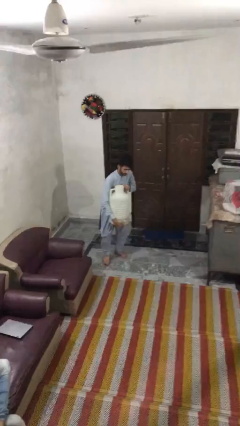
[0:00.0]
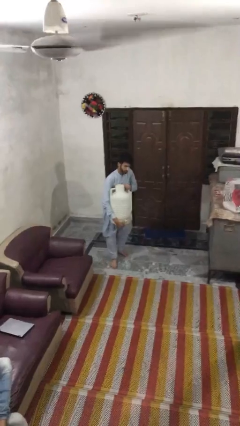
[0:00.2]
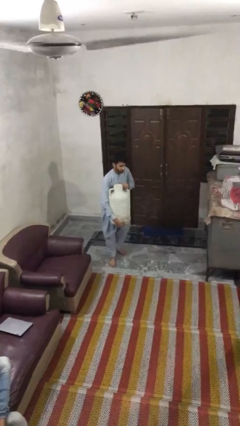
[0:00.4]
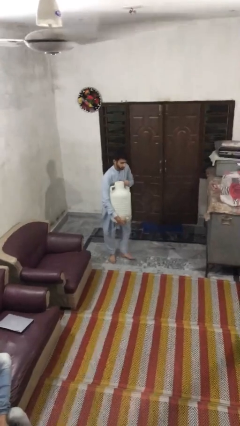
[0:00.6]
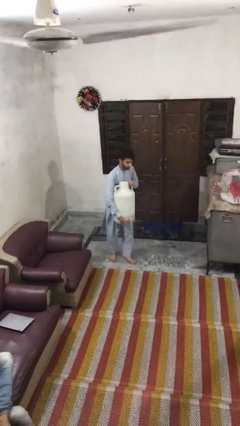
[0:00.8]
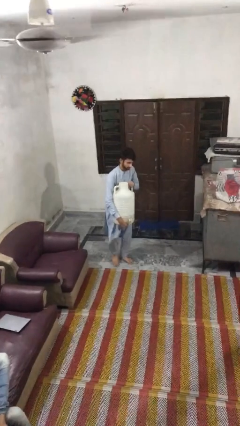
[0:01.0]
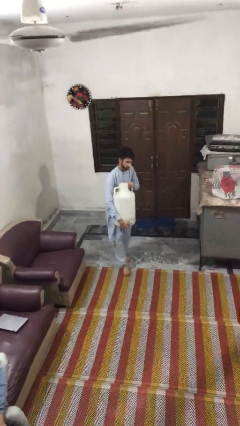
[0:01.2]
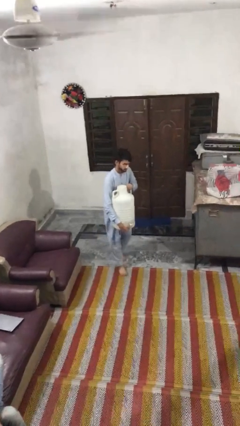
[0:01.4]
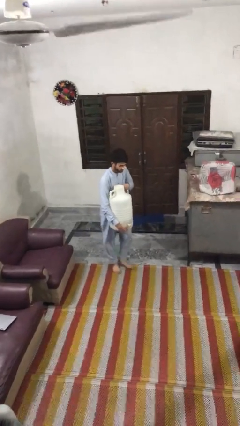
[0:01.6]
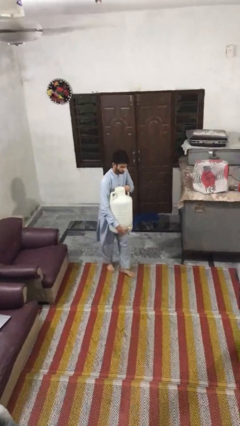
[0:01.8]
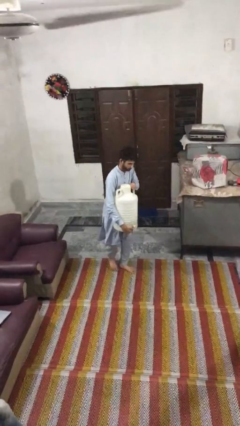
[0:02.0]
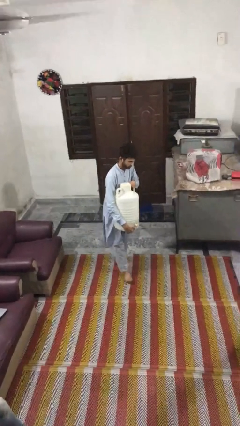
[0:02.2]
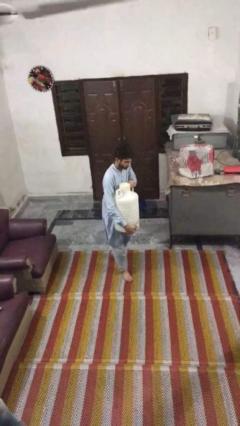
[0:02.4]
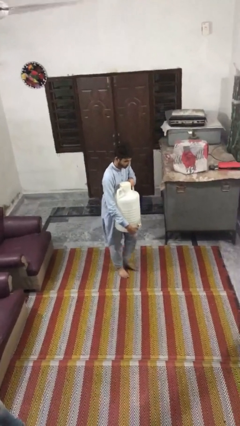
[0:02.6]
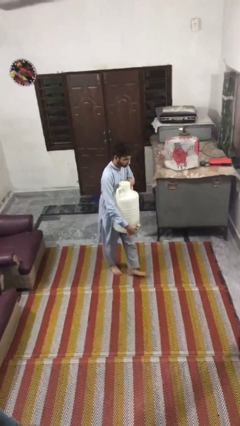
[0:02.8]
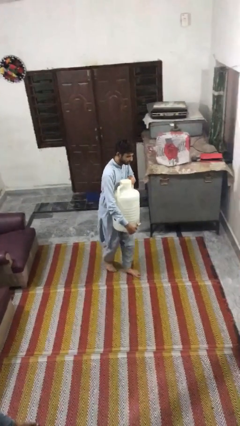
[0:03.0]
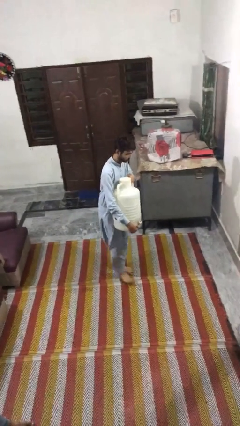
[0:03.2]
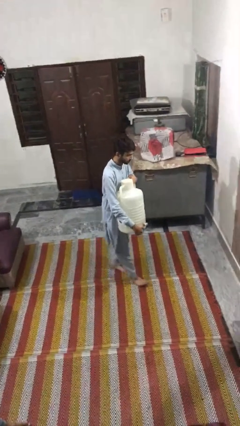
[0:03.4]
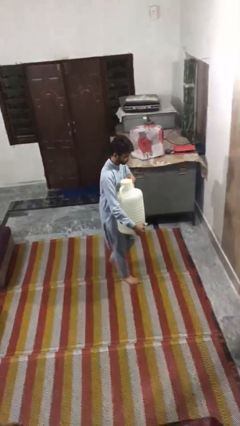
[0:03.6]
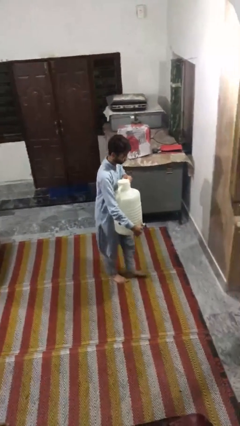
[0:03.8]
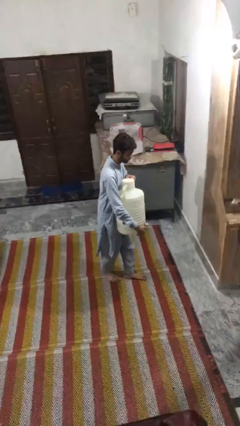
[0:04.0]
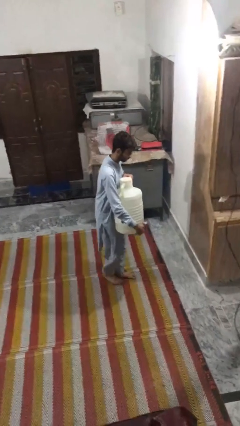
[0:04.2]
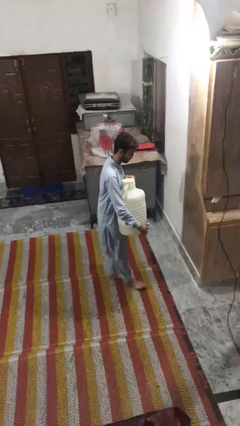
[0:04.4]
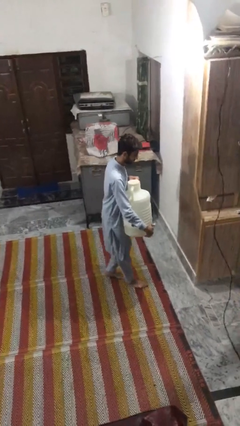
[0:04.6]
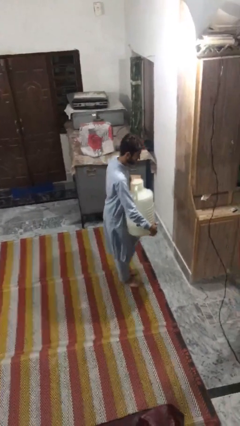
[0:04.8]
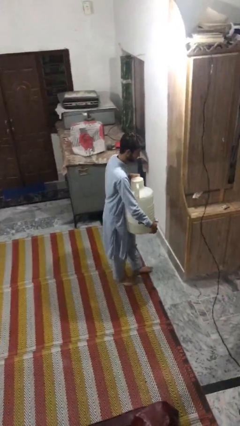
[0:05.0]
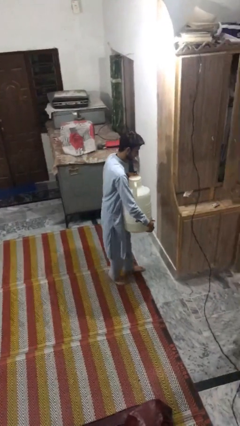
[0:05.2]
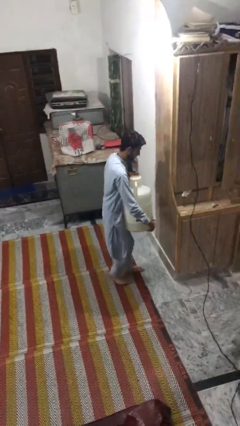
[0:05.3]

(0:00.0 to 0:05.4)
person carries heavy object

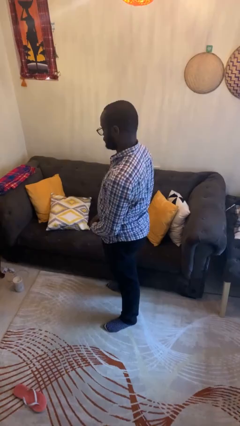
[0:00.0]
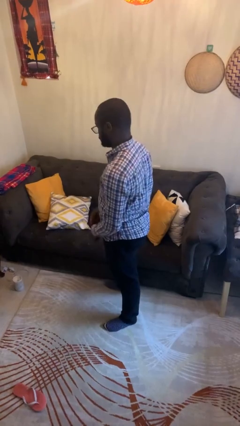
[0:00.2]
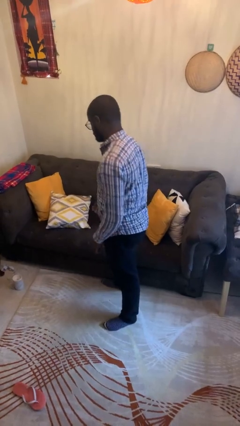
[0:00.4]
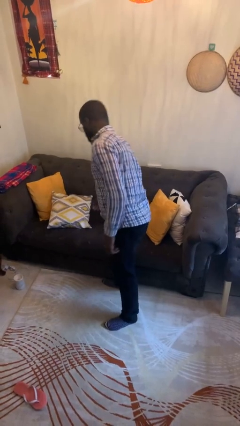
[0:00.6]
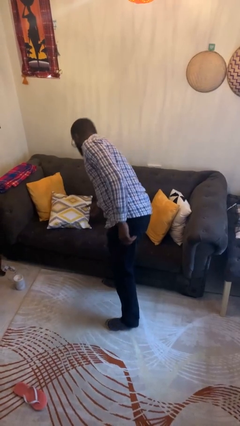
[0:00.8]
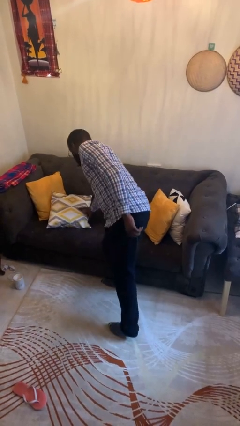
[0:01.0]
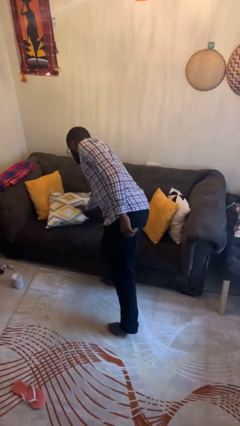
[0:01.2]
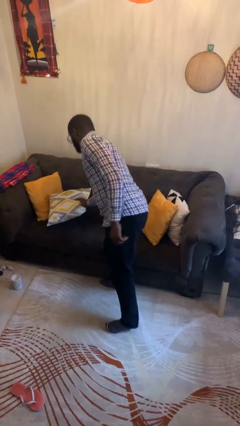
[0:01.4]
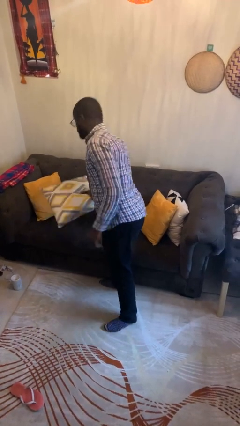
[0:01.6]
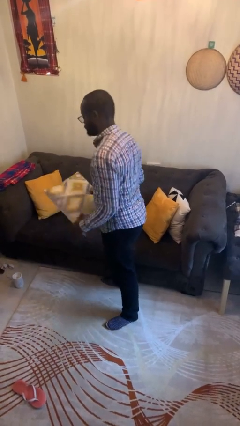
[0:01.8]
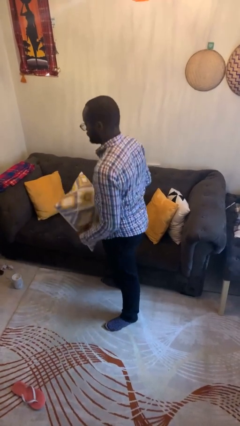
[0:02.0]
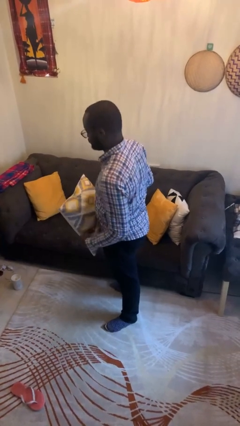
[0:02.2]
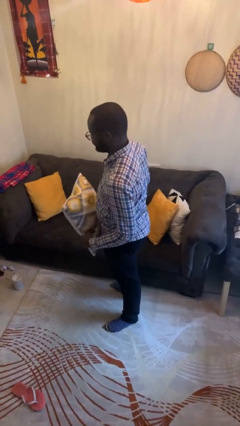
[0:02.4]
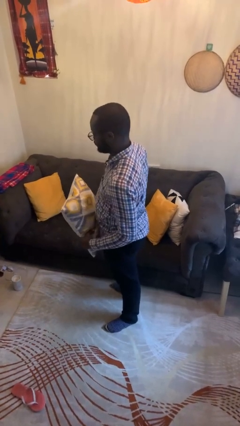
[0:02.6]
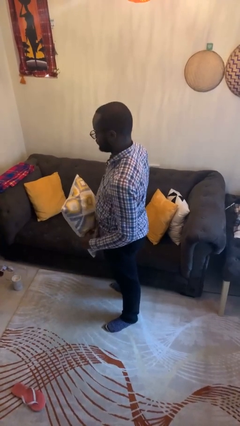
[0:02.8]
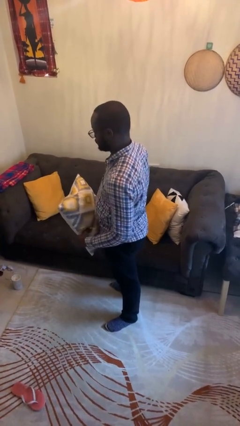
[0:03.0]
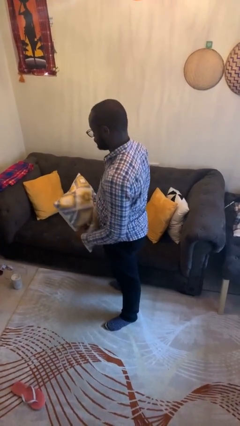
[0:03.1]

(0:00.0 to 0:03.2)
person picks up object from couch

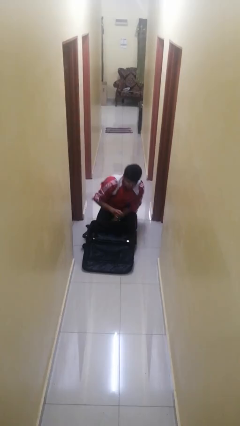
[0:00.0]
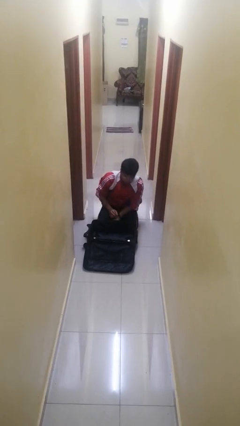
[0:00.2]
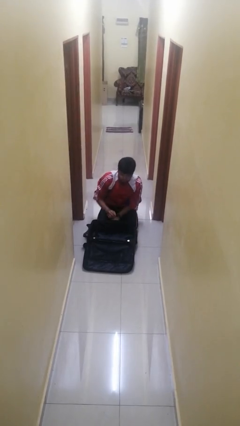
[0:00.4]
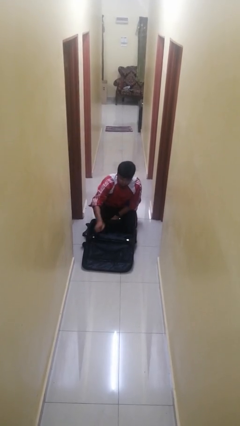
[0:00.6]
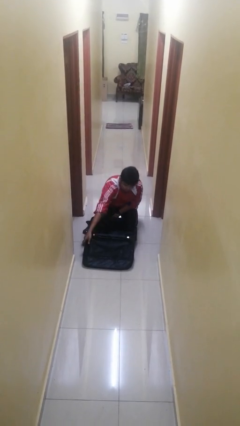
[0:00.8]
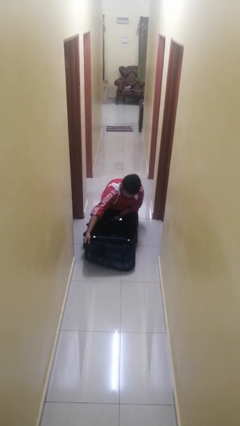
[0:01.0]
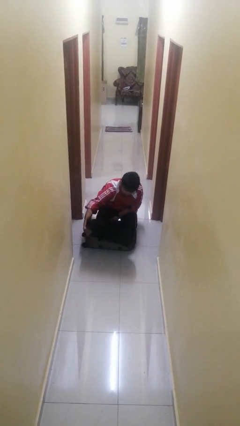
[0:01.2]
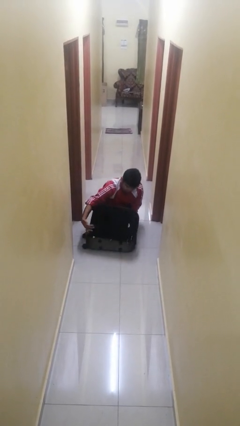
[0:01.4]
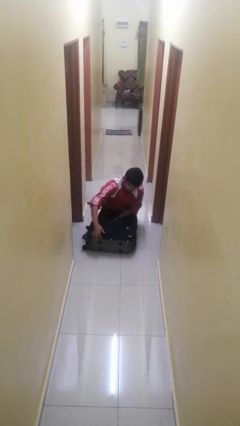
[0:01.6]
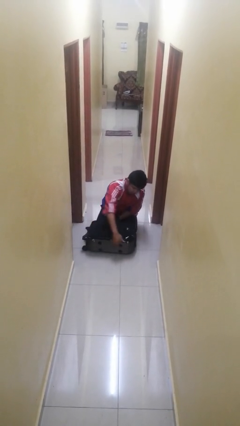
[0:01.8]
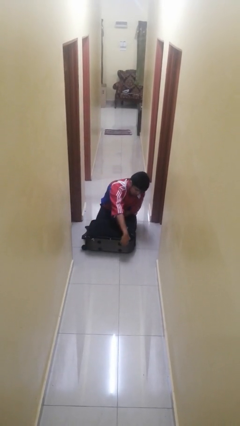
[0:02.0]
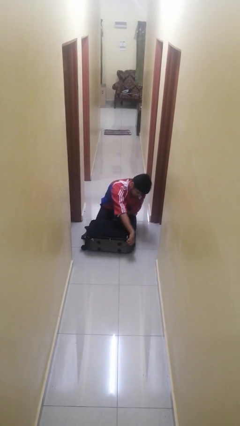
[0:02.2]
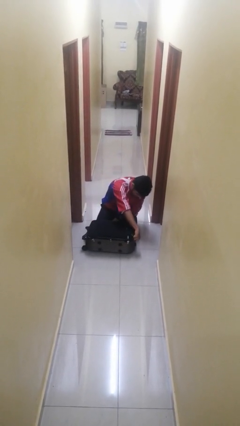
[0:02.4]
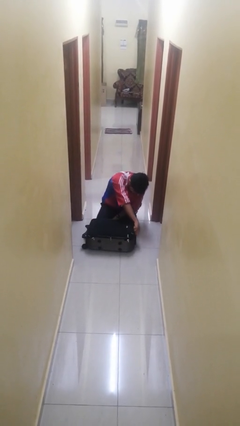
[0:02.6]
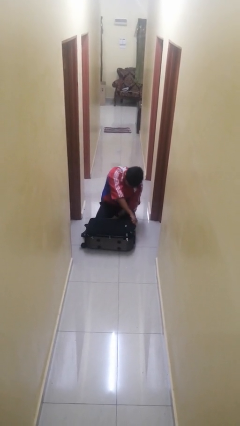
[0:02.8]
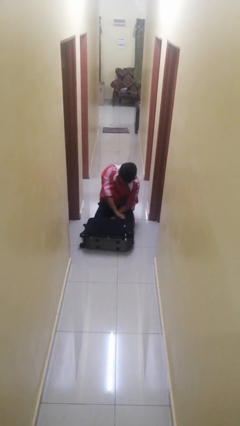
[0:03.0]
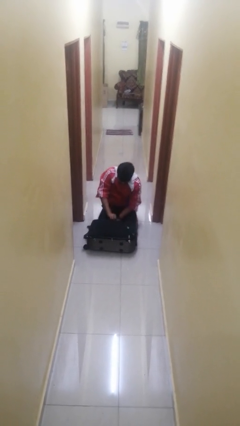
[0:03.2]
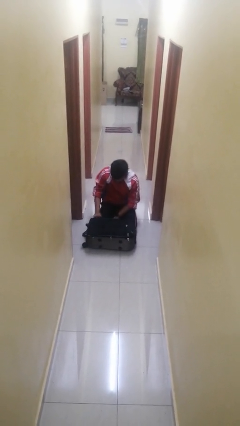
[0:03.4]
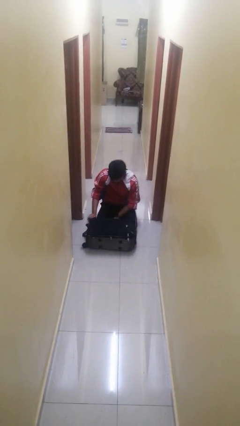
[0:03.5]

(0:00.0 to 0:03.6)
person closes suitcase

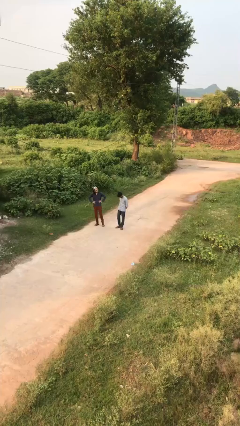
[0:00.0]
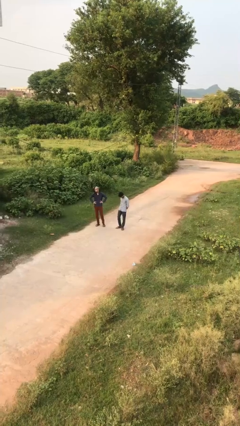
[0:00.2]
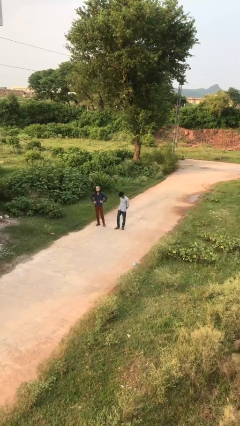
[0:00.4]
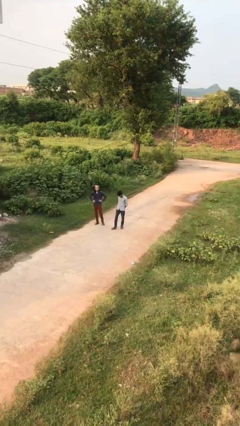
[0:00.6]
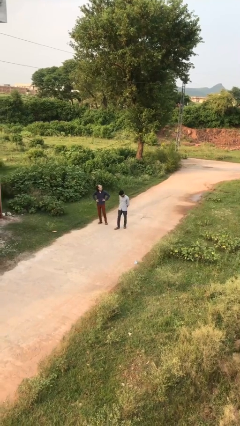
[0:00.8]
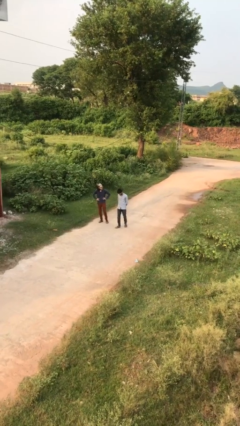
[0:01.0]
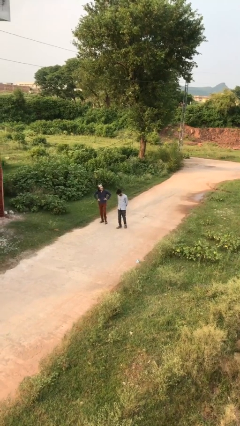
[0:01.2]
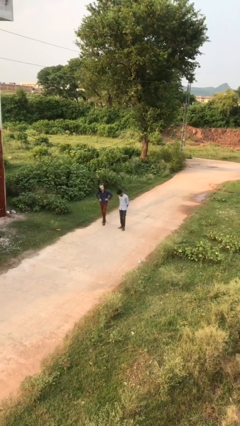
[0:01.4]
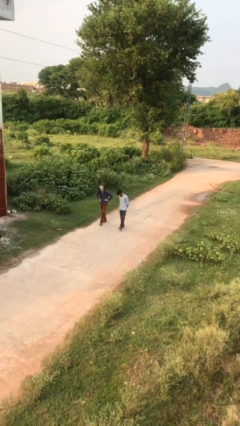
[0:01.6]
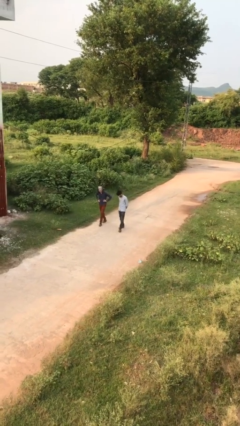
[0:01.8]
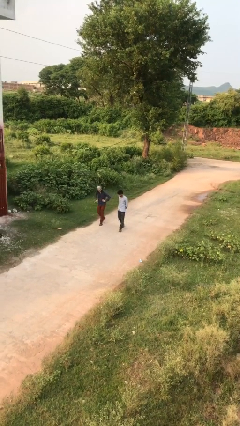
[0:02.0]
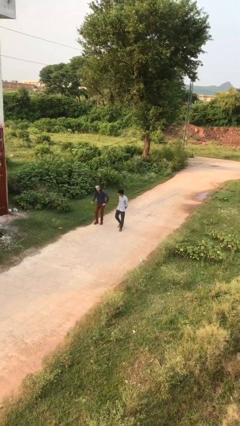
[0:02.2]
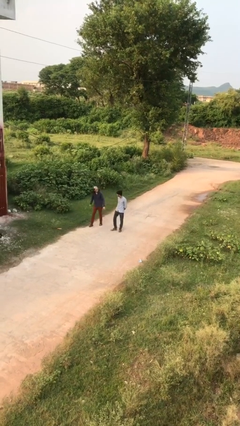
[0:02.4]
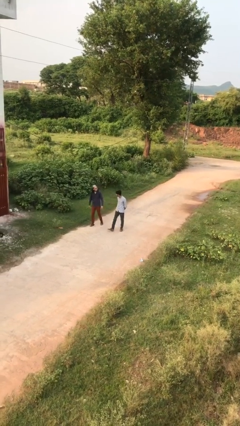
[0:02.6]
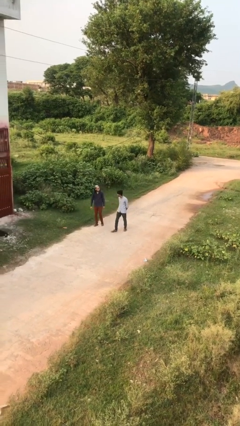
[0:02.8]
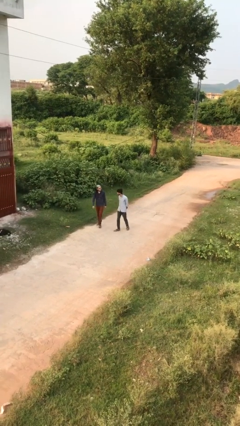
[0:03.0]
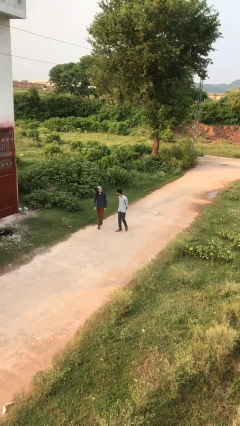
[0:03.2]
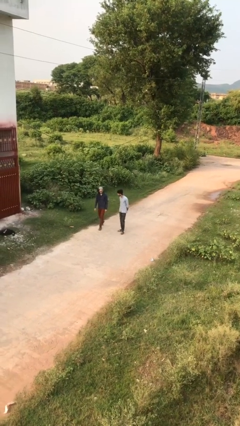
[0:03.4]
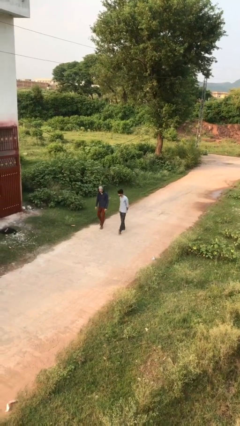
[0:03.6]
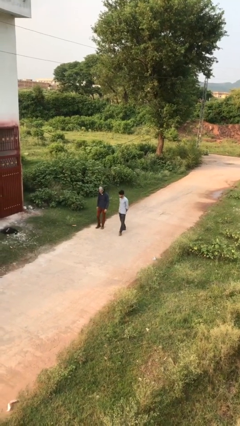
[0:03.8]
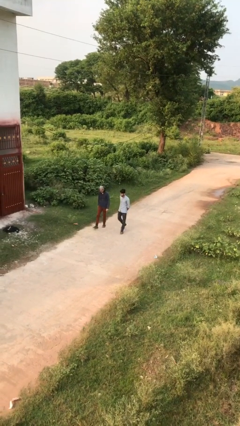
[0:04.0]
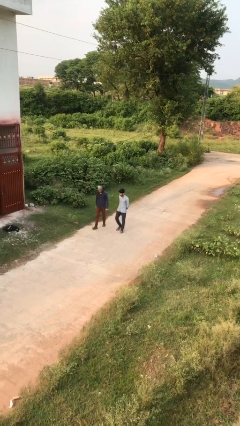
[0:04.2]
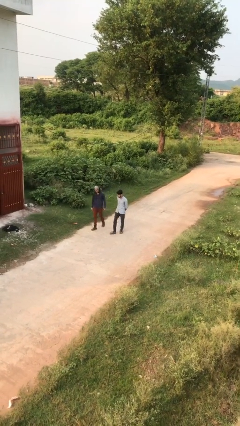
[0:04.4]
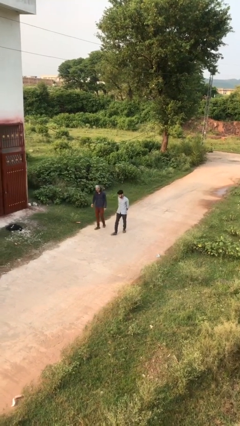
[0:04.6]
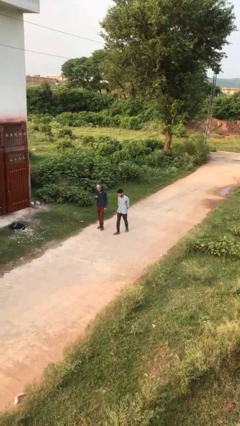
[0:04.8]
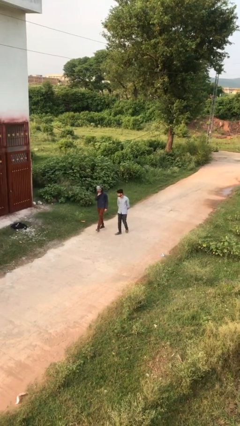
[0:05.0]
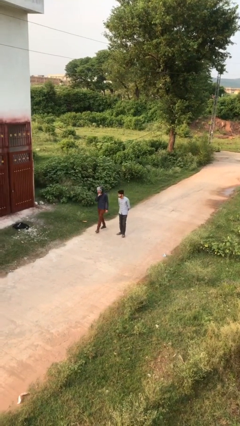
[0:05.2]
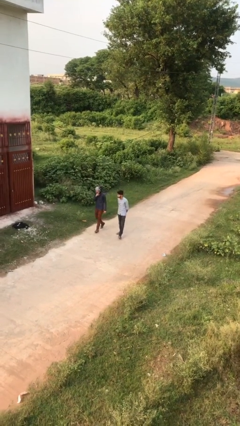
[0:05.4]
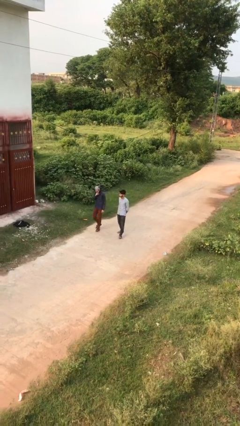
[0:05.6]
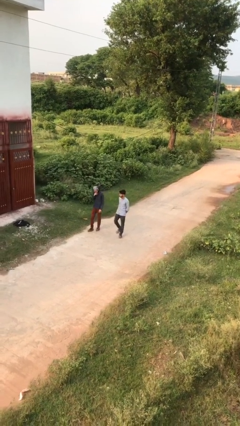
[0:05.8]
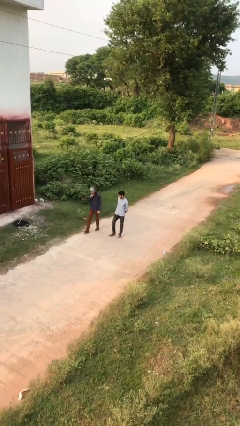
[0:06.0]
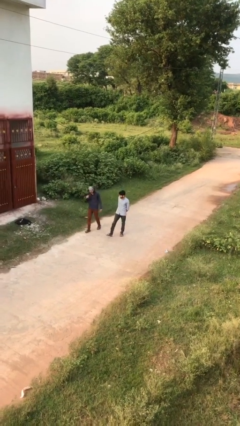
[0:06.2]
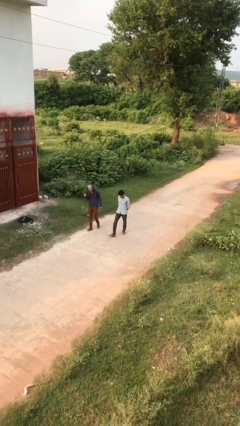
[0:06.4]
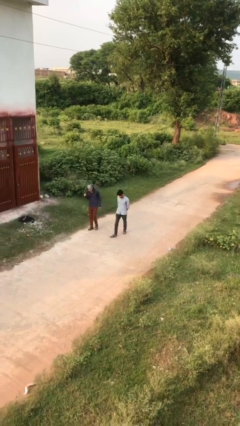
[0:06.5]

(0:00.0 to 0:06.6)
person talks to person
